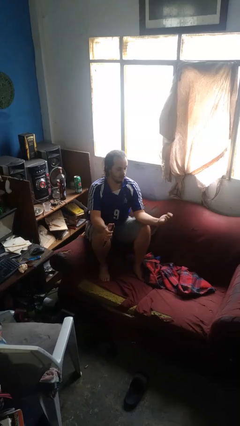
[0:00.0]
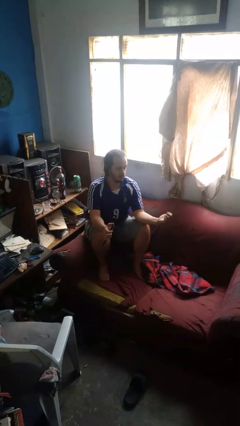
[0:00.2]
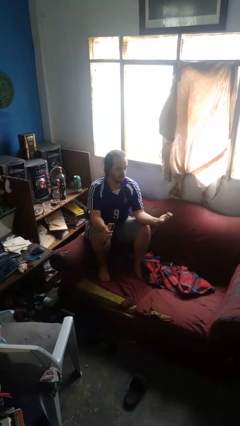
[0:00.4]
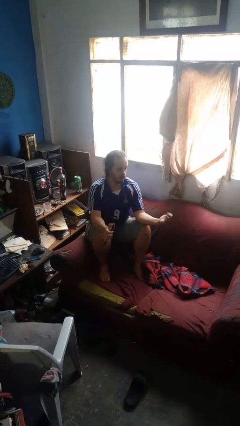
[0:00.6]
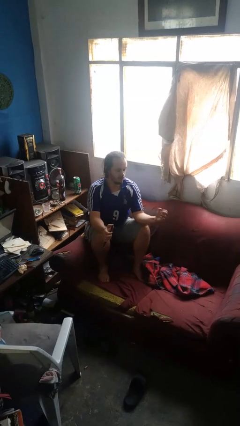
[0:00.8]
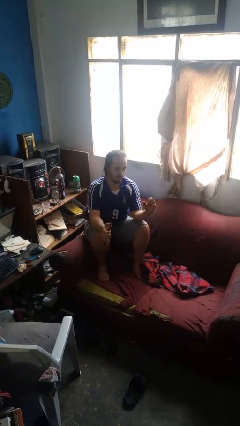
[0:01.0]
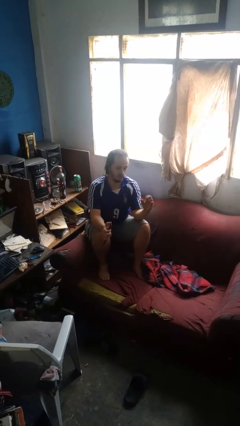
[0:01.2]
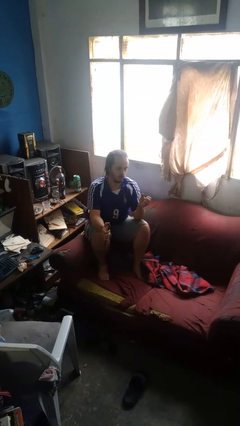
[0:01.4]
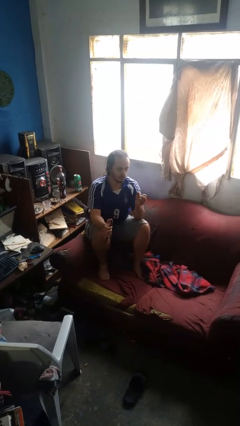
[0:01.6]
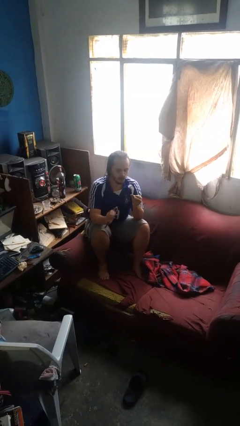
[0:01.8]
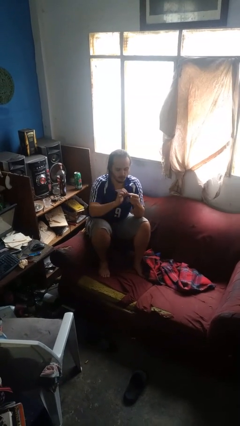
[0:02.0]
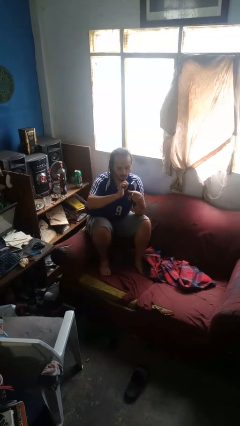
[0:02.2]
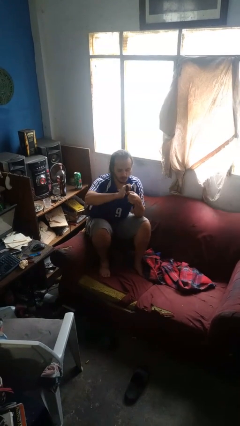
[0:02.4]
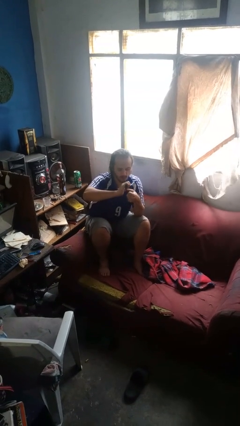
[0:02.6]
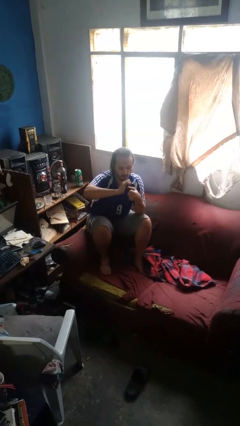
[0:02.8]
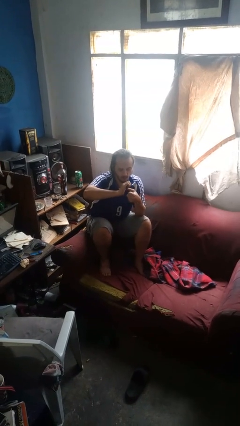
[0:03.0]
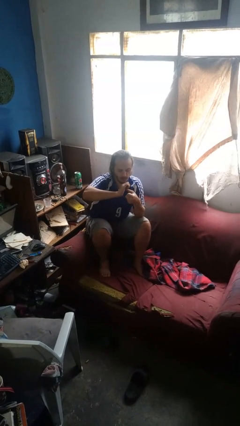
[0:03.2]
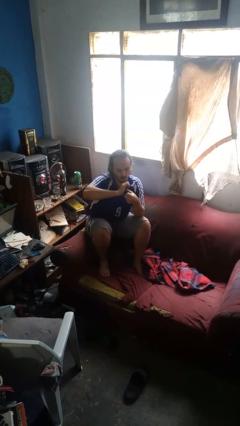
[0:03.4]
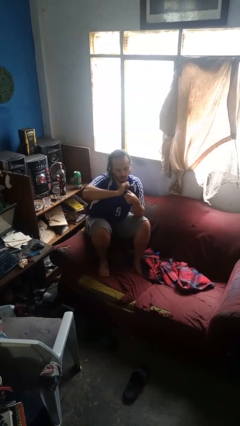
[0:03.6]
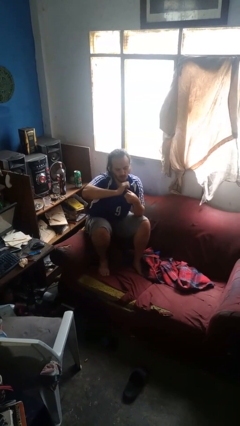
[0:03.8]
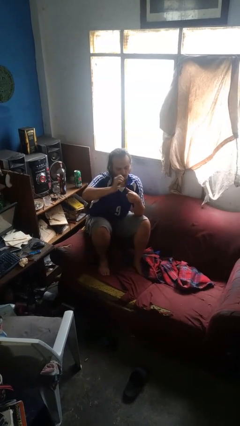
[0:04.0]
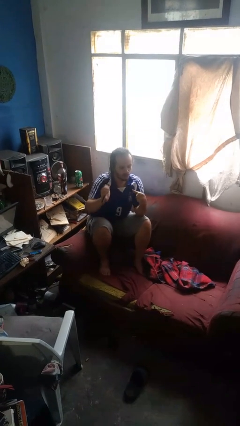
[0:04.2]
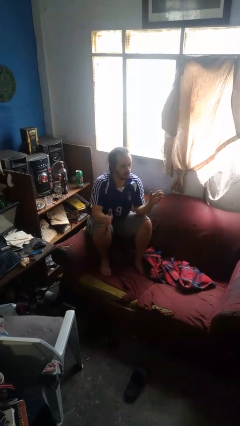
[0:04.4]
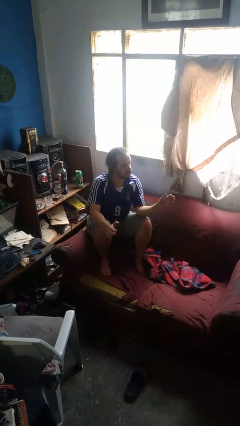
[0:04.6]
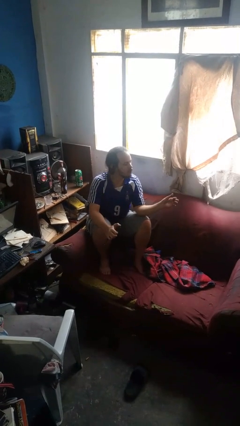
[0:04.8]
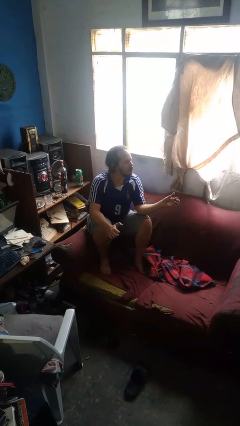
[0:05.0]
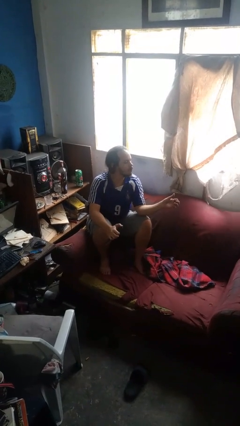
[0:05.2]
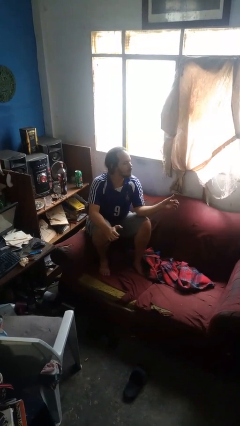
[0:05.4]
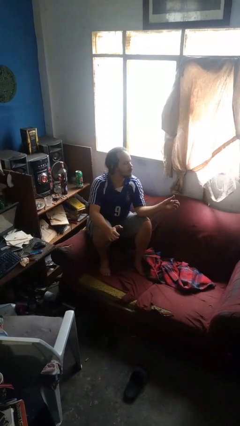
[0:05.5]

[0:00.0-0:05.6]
person files fingernails

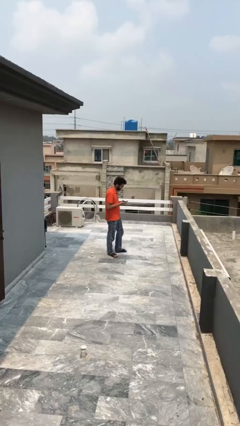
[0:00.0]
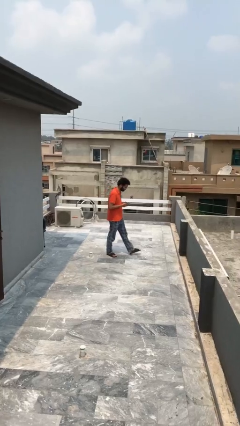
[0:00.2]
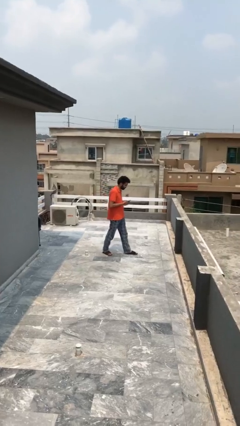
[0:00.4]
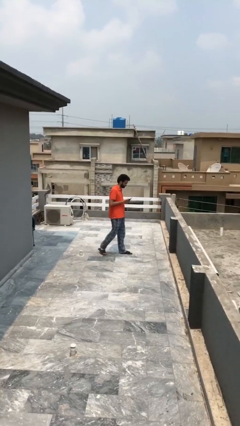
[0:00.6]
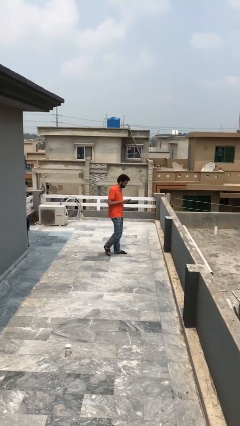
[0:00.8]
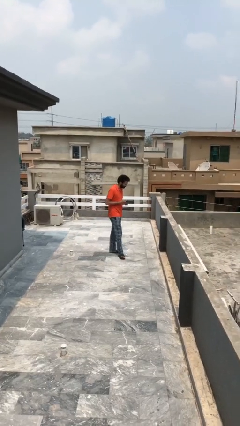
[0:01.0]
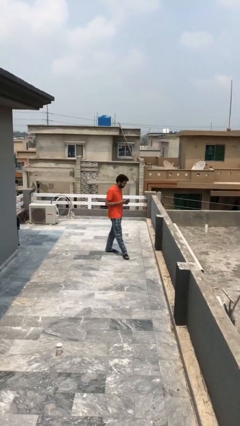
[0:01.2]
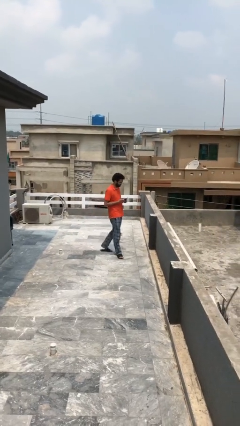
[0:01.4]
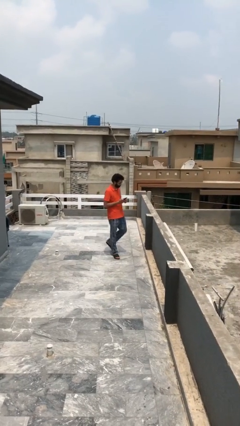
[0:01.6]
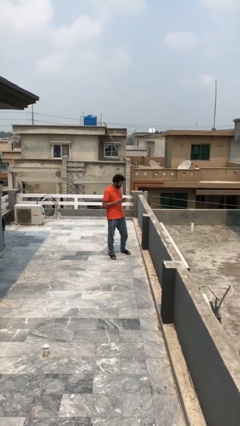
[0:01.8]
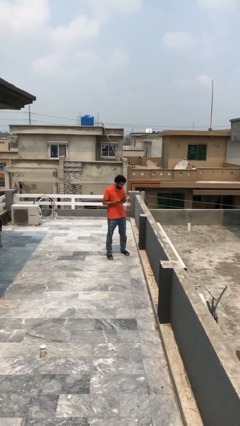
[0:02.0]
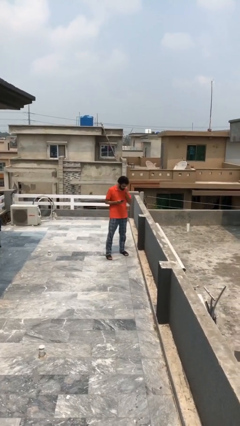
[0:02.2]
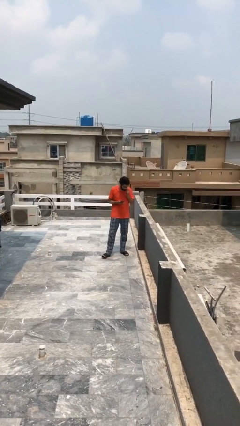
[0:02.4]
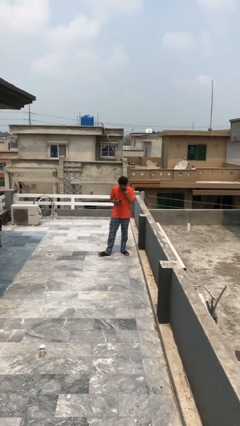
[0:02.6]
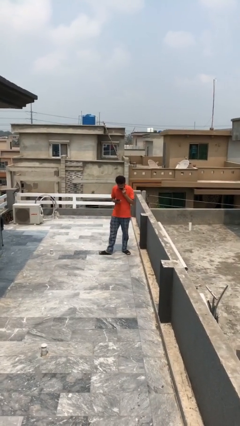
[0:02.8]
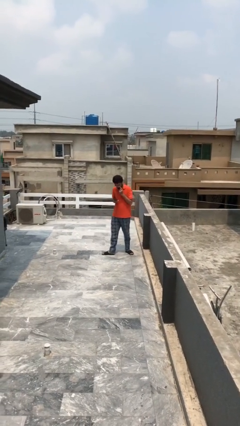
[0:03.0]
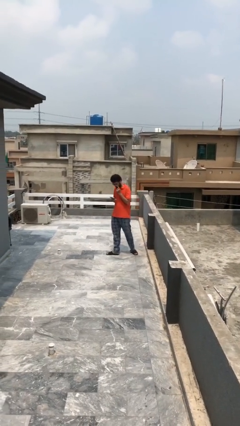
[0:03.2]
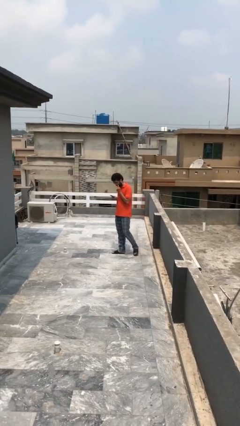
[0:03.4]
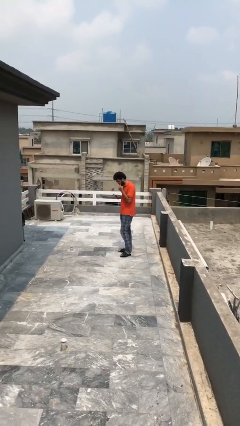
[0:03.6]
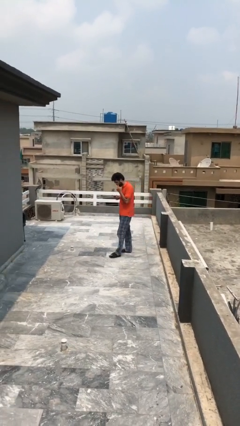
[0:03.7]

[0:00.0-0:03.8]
person texts on phone

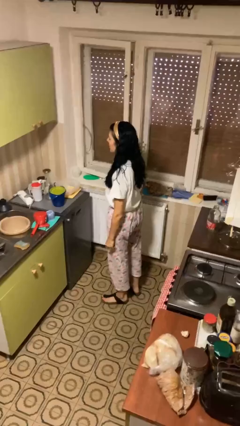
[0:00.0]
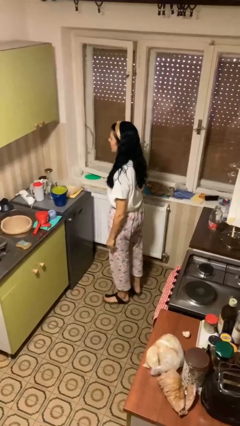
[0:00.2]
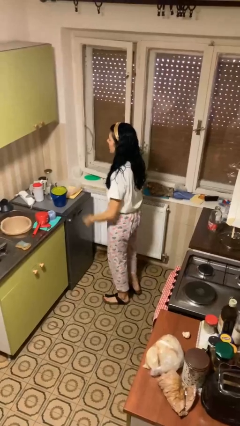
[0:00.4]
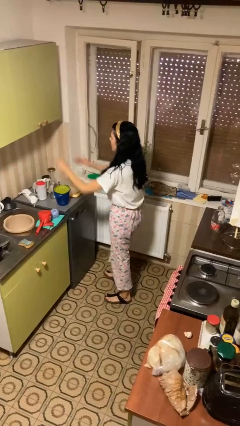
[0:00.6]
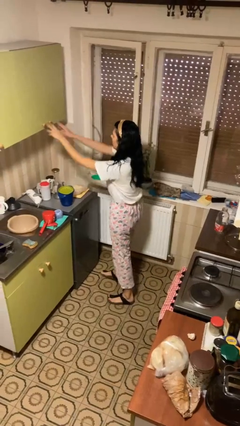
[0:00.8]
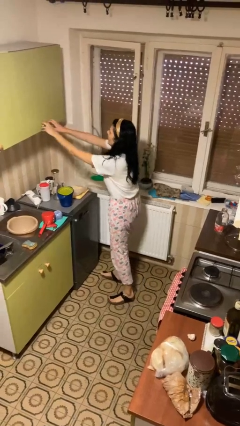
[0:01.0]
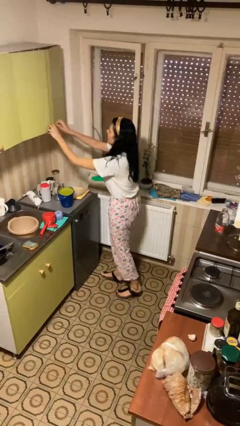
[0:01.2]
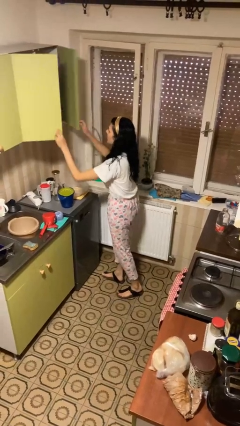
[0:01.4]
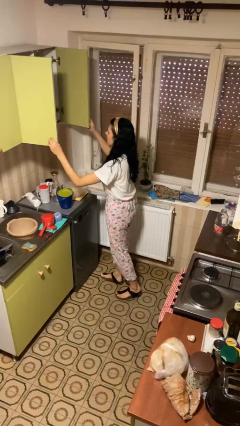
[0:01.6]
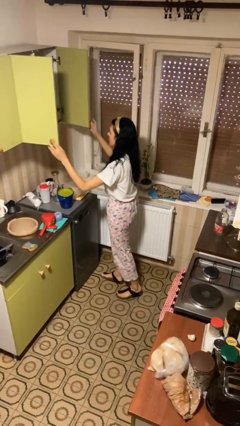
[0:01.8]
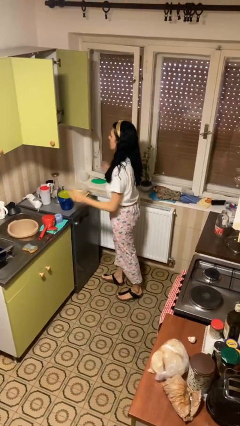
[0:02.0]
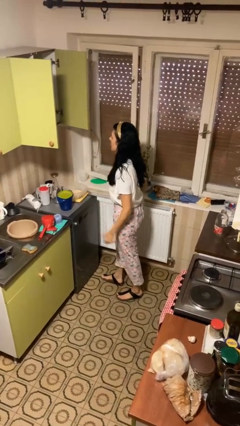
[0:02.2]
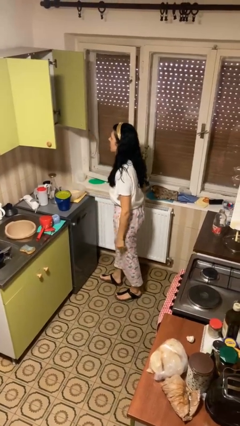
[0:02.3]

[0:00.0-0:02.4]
person opens cabinet

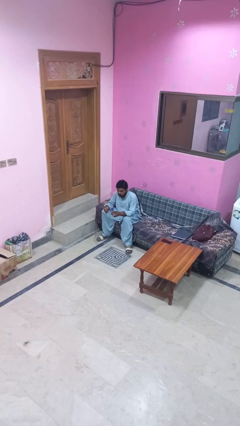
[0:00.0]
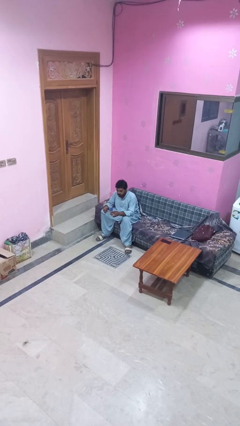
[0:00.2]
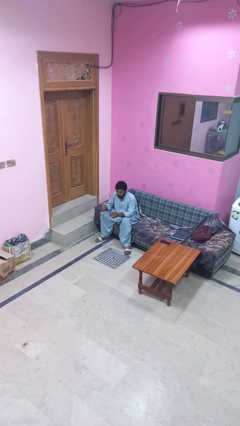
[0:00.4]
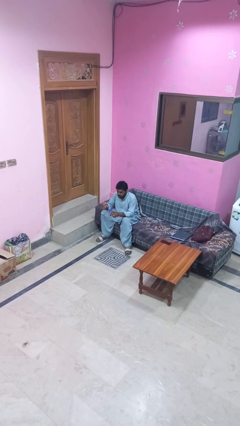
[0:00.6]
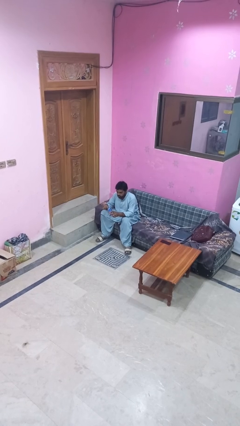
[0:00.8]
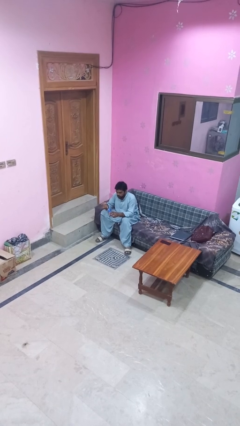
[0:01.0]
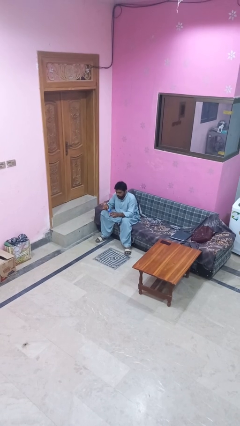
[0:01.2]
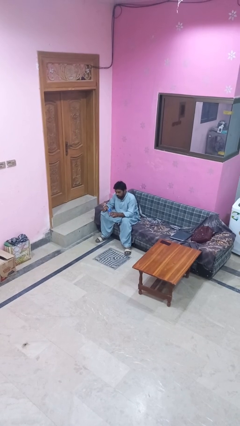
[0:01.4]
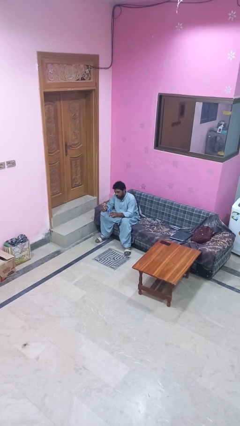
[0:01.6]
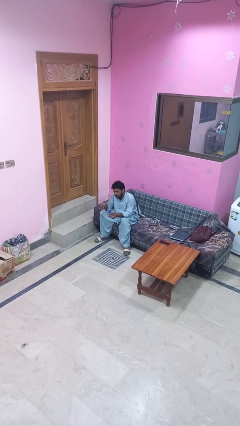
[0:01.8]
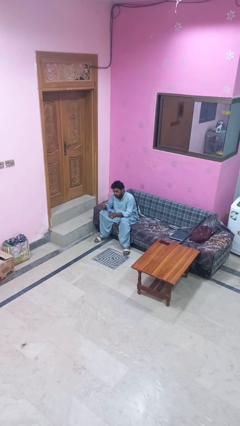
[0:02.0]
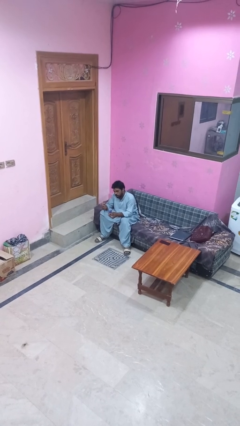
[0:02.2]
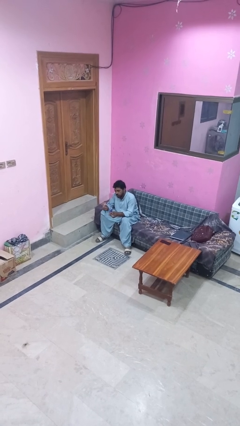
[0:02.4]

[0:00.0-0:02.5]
person opens can with can opener

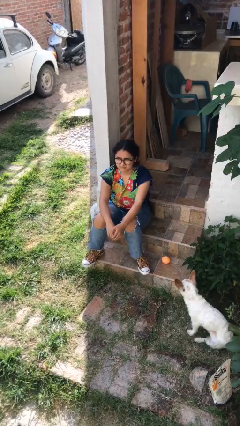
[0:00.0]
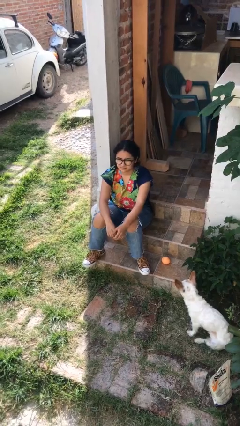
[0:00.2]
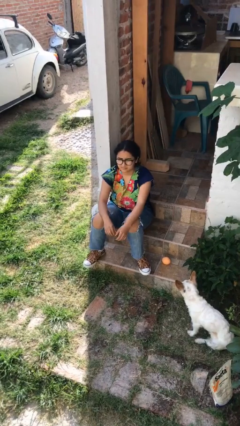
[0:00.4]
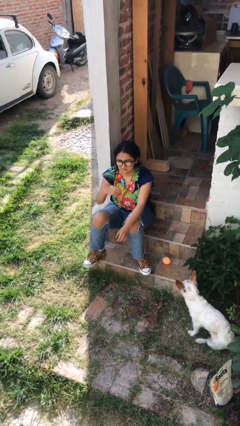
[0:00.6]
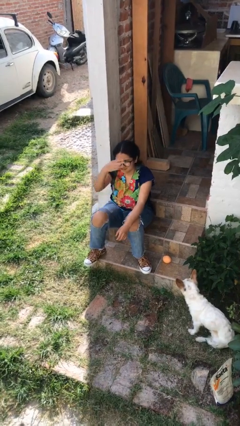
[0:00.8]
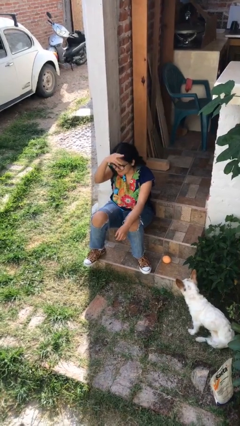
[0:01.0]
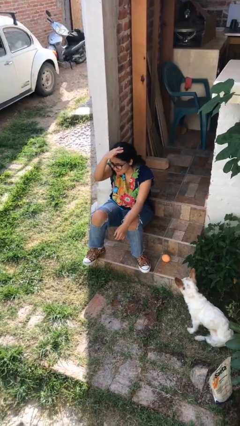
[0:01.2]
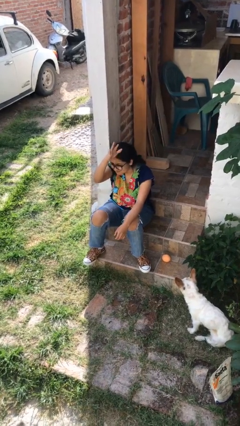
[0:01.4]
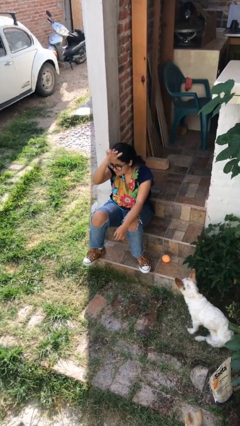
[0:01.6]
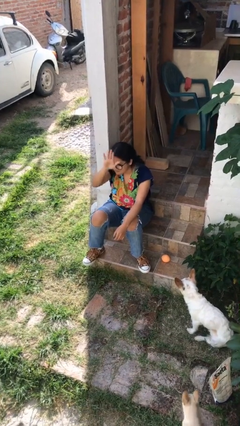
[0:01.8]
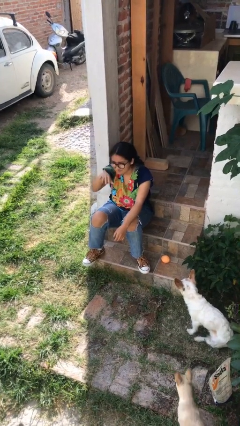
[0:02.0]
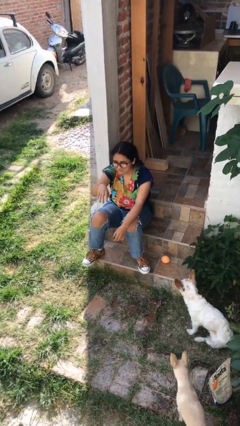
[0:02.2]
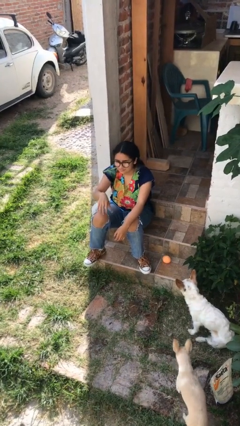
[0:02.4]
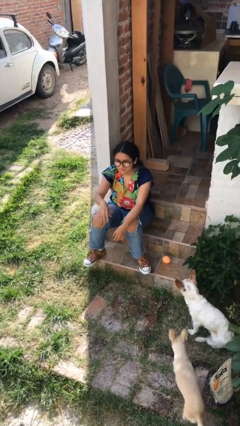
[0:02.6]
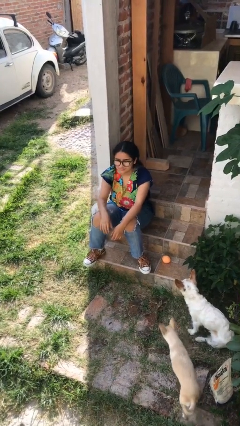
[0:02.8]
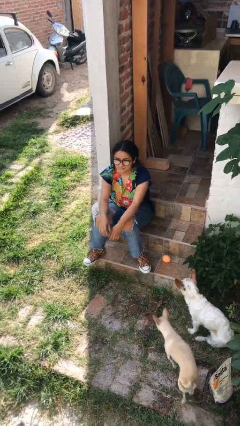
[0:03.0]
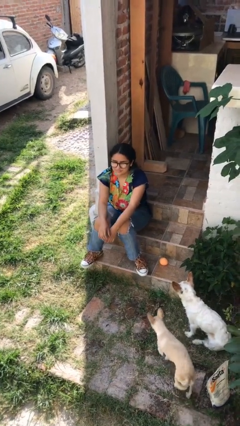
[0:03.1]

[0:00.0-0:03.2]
person gestures come here
